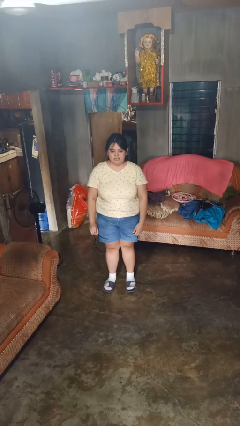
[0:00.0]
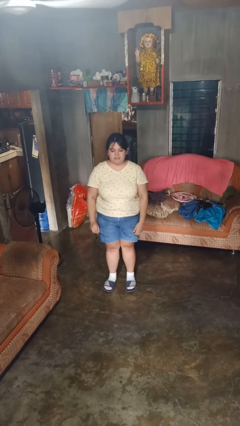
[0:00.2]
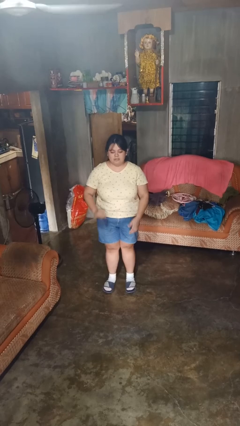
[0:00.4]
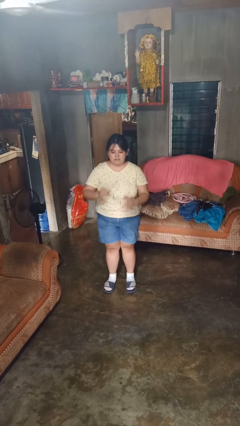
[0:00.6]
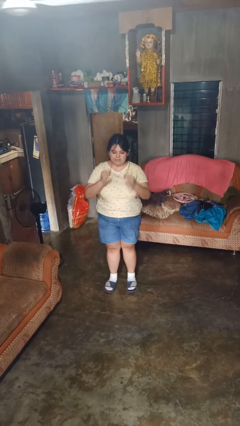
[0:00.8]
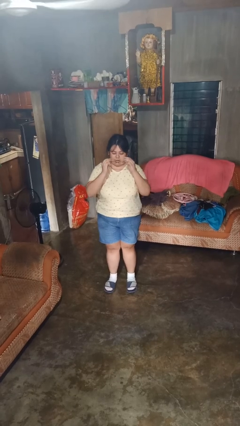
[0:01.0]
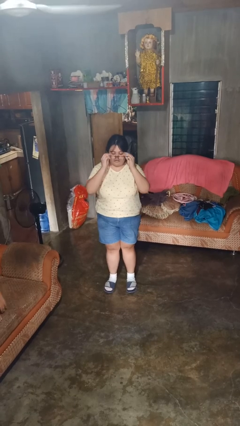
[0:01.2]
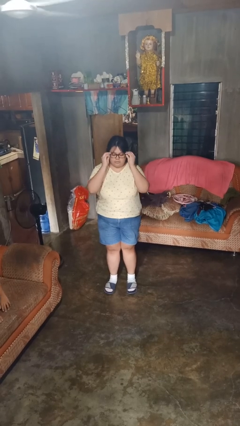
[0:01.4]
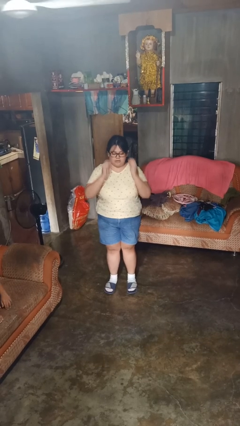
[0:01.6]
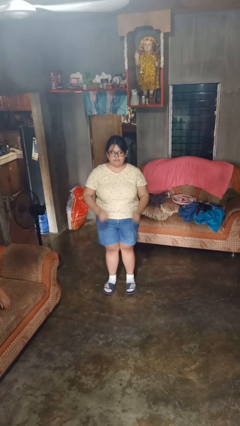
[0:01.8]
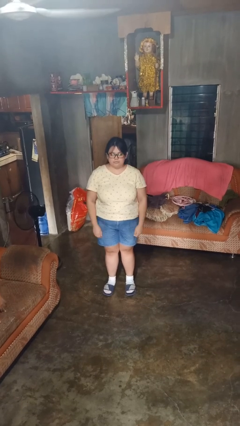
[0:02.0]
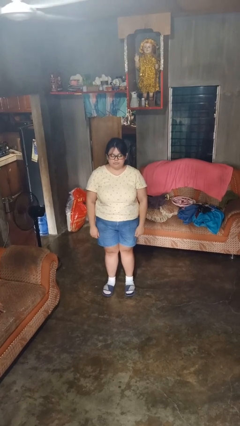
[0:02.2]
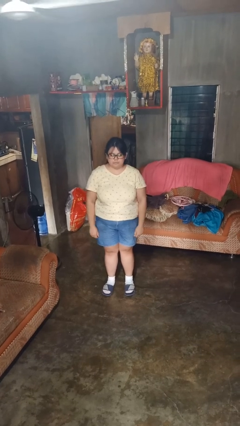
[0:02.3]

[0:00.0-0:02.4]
person puts on glasses

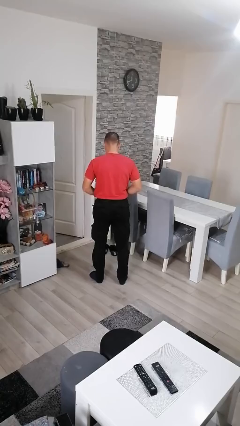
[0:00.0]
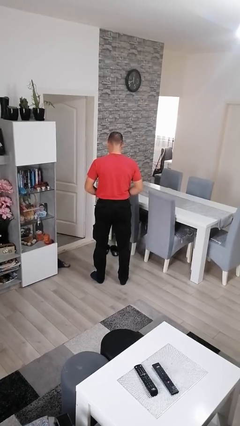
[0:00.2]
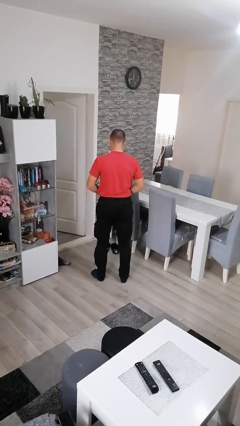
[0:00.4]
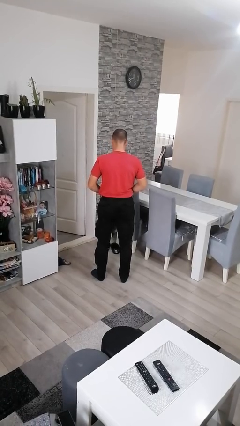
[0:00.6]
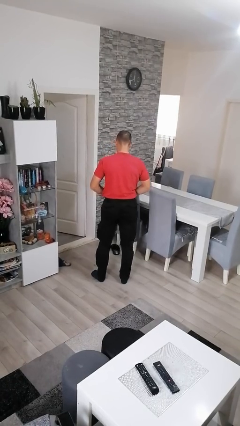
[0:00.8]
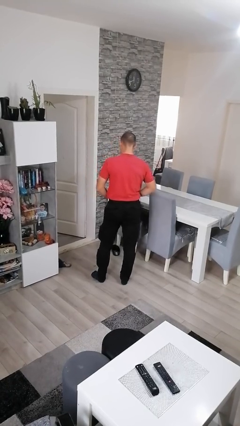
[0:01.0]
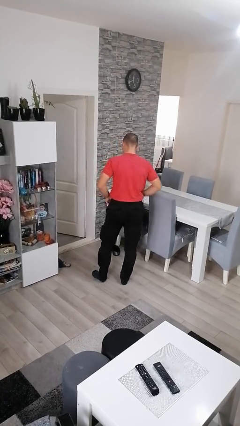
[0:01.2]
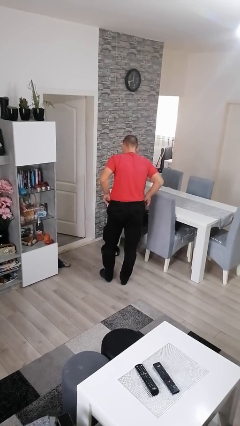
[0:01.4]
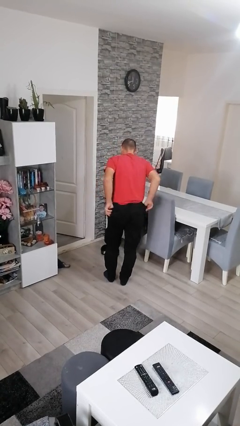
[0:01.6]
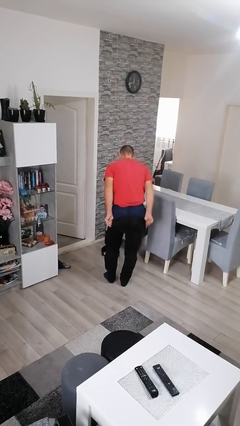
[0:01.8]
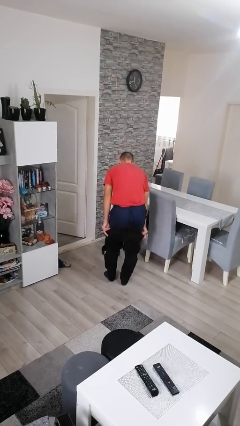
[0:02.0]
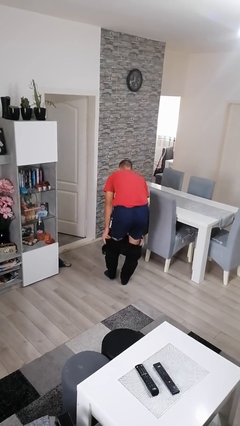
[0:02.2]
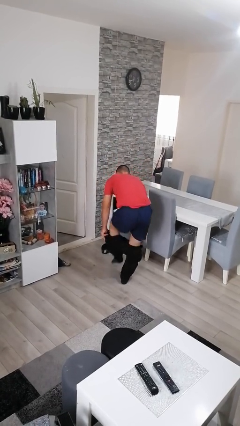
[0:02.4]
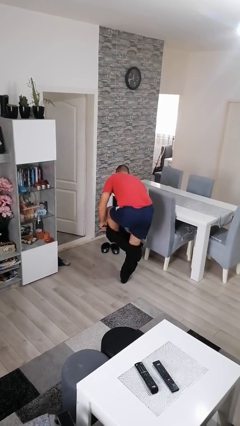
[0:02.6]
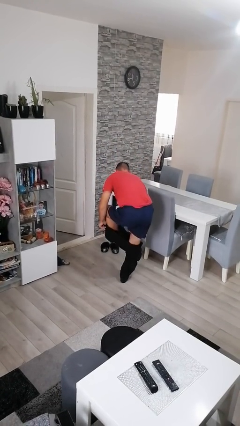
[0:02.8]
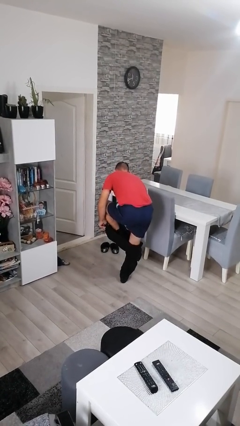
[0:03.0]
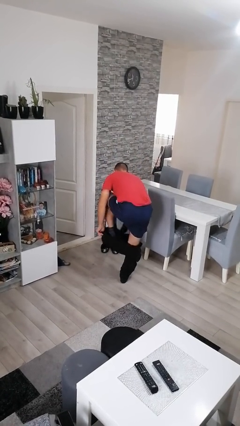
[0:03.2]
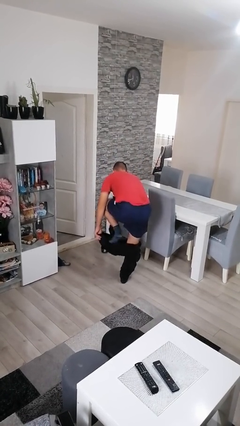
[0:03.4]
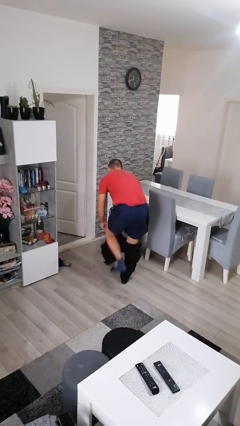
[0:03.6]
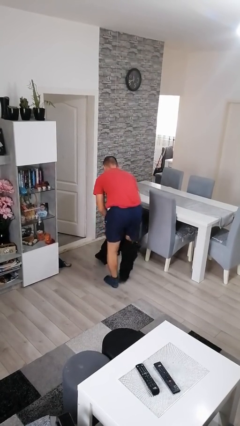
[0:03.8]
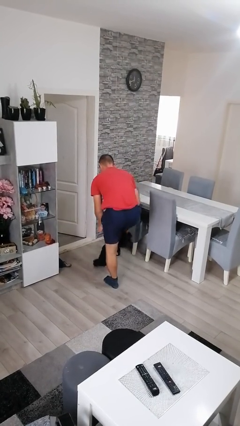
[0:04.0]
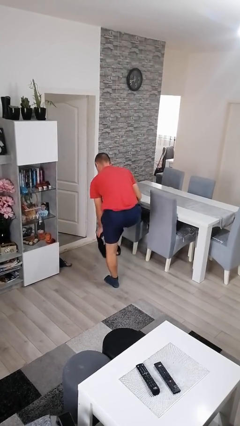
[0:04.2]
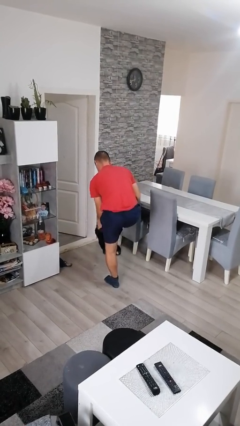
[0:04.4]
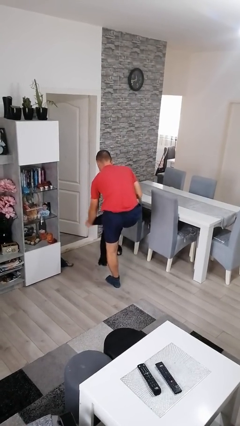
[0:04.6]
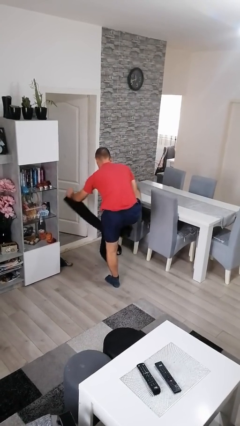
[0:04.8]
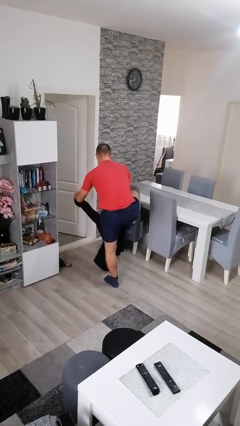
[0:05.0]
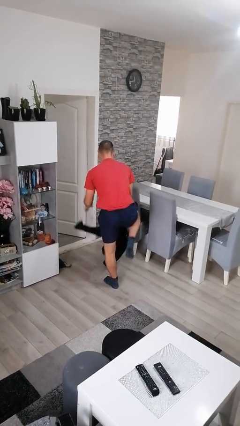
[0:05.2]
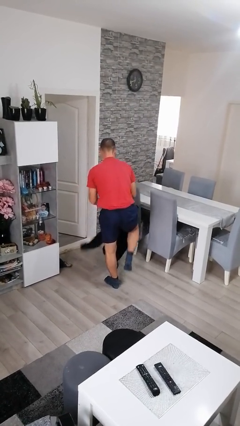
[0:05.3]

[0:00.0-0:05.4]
person takes off pants

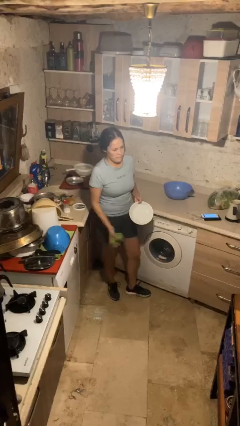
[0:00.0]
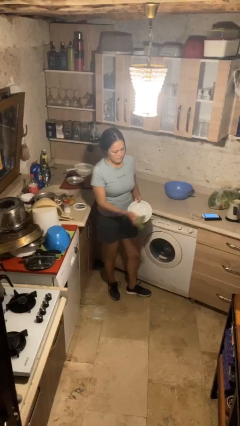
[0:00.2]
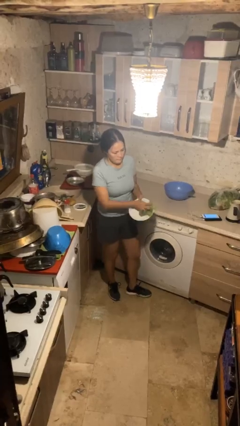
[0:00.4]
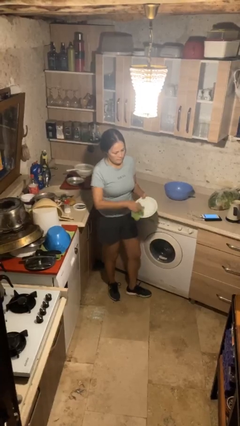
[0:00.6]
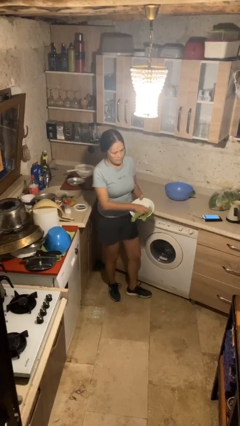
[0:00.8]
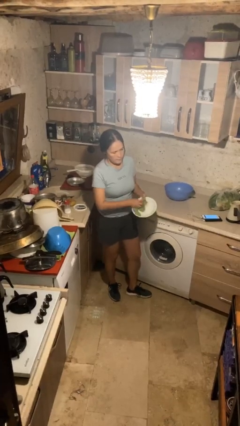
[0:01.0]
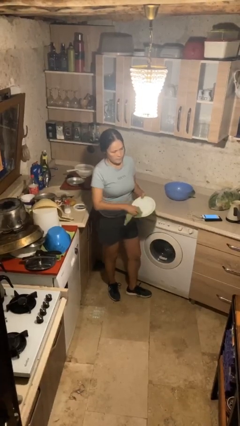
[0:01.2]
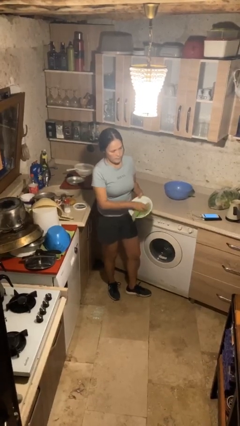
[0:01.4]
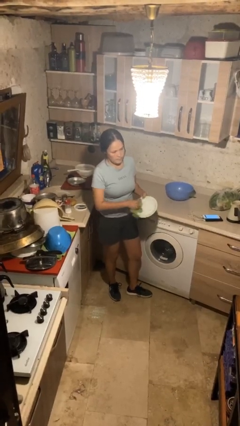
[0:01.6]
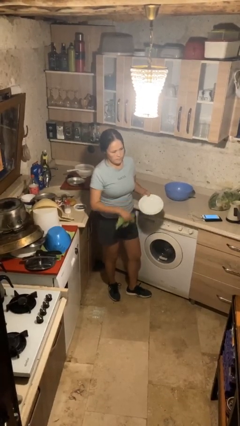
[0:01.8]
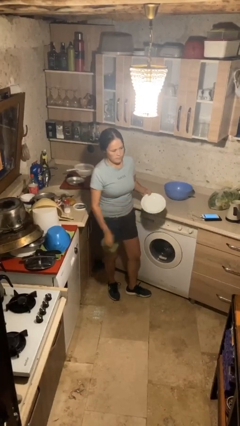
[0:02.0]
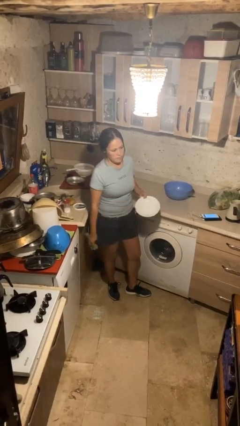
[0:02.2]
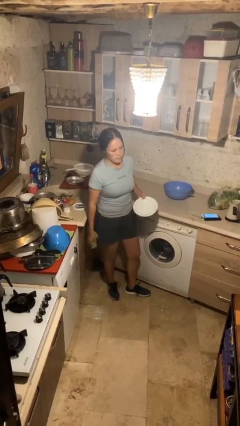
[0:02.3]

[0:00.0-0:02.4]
person dries dish

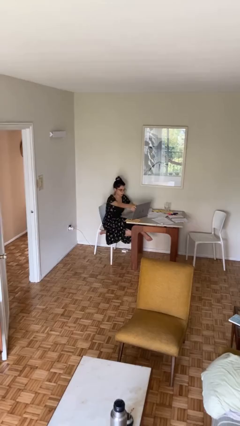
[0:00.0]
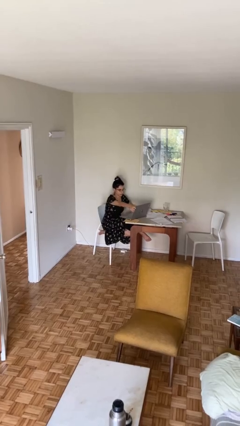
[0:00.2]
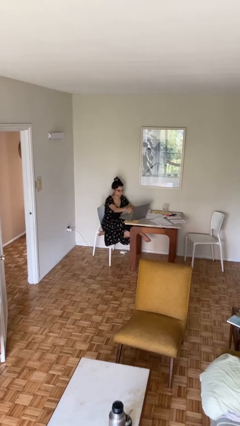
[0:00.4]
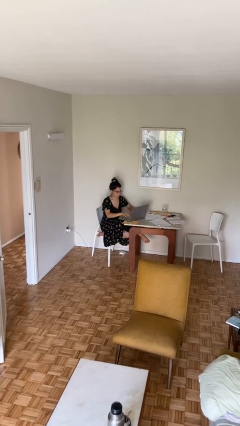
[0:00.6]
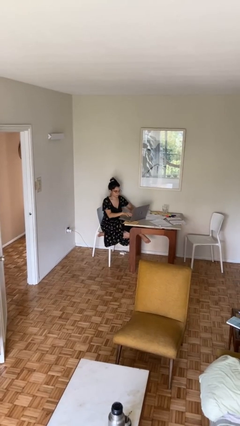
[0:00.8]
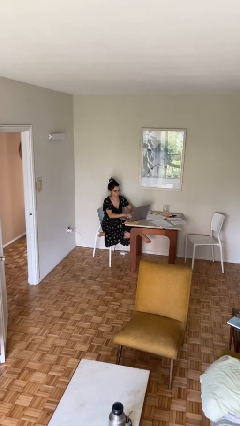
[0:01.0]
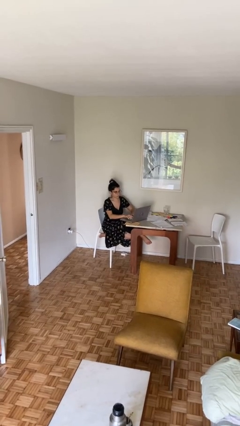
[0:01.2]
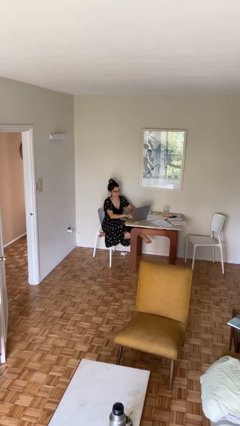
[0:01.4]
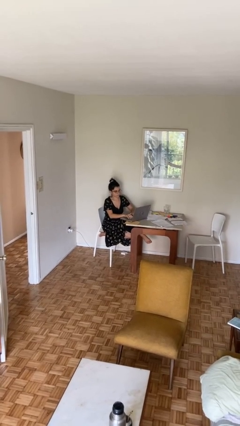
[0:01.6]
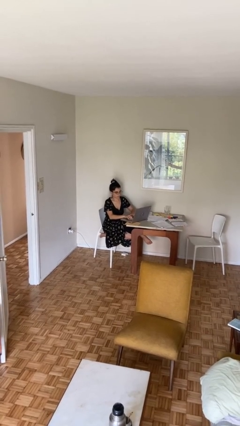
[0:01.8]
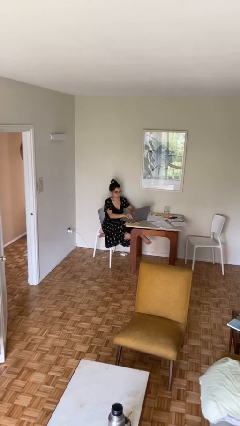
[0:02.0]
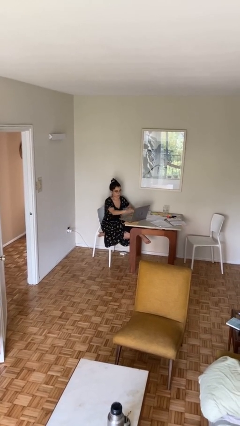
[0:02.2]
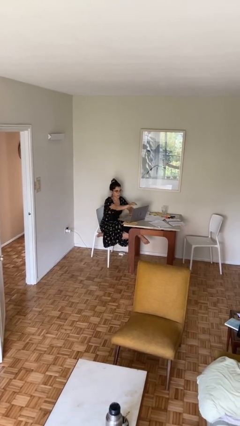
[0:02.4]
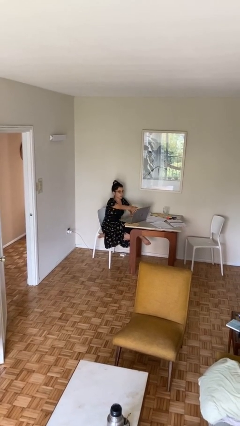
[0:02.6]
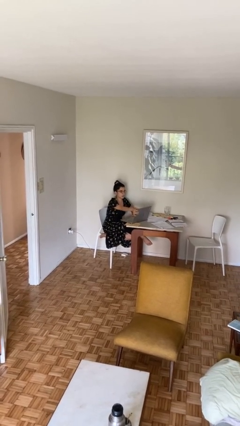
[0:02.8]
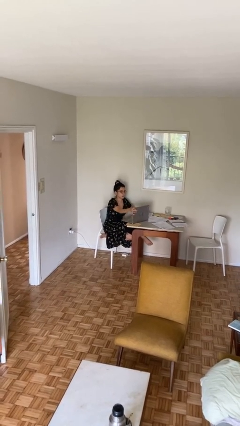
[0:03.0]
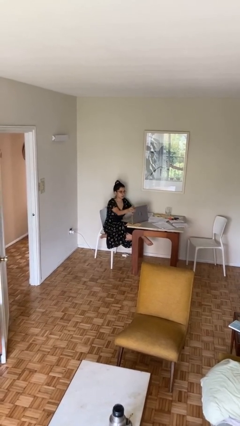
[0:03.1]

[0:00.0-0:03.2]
person interacts with laptop

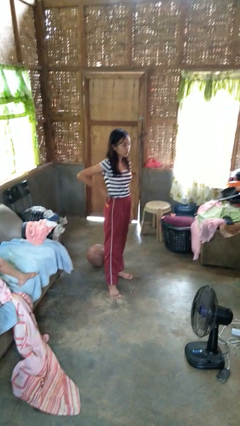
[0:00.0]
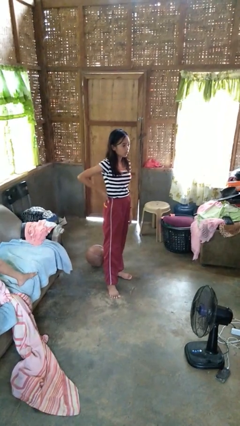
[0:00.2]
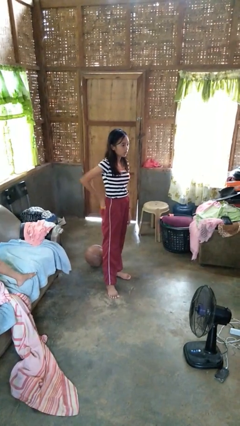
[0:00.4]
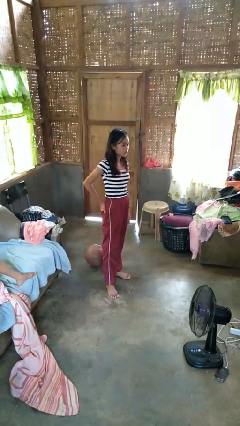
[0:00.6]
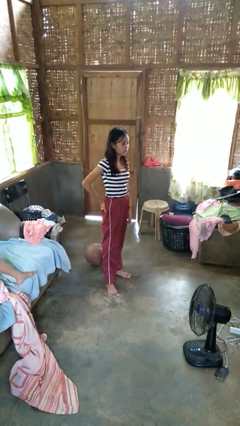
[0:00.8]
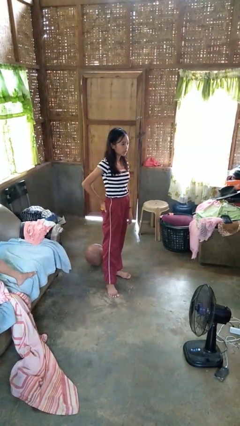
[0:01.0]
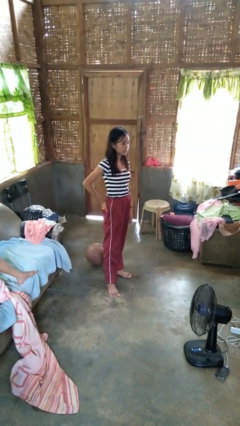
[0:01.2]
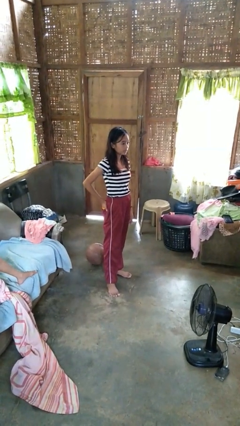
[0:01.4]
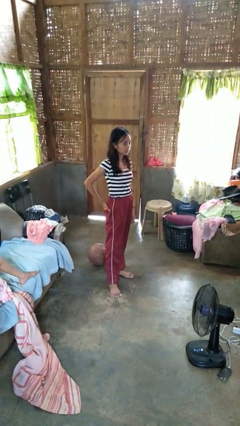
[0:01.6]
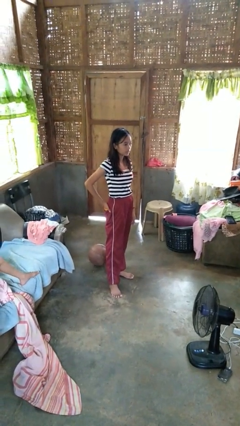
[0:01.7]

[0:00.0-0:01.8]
person puts hands in back pockets

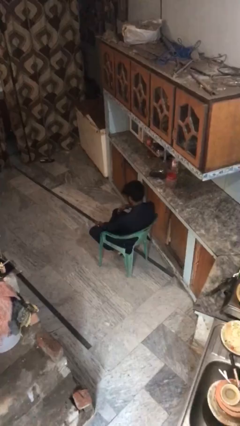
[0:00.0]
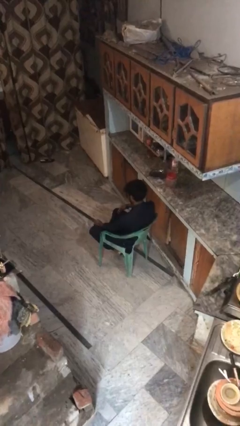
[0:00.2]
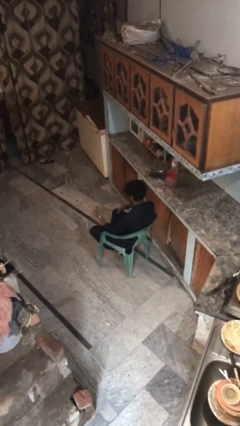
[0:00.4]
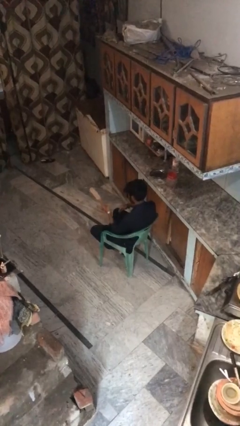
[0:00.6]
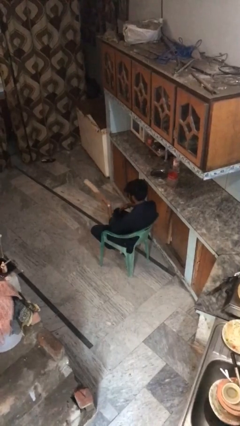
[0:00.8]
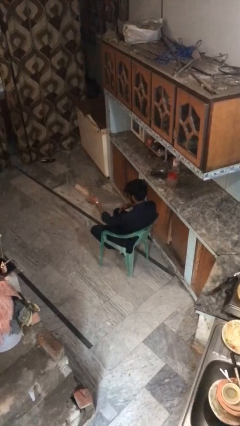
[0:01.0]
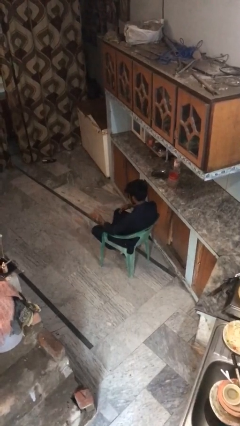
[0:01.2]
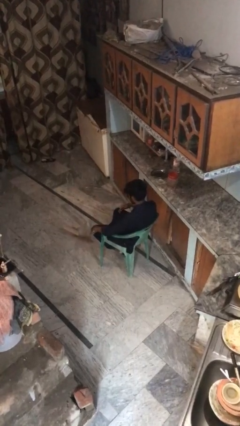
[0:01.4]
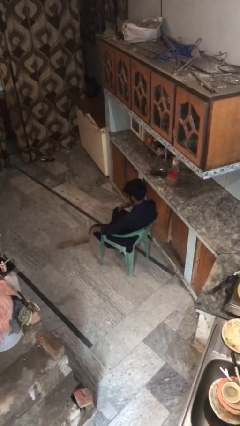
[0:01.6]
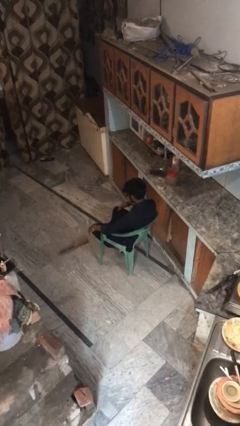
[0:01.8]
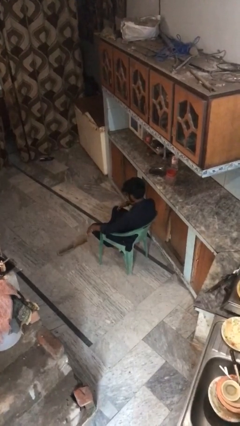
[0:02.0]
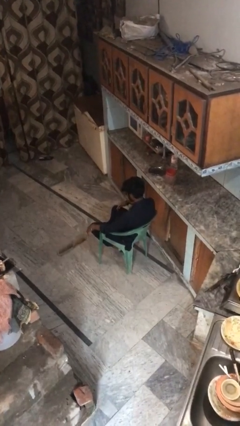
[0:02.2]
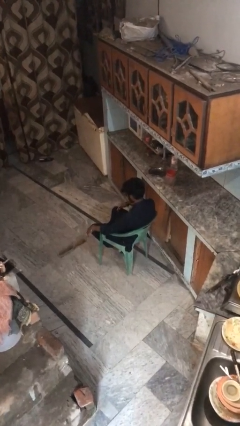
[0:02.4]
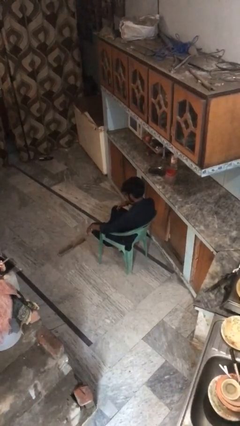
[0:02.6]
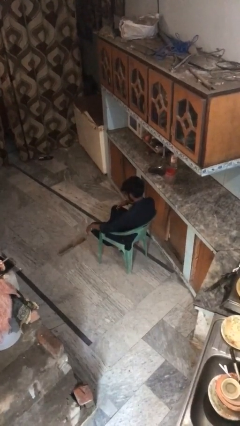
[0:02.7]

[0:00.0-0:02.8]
person throws object to ground
